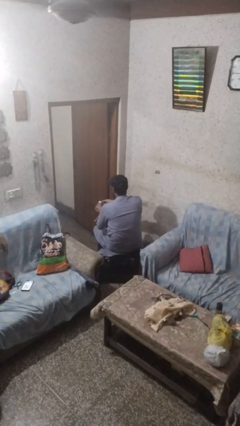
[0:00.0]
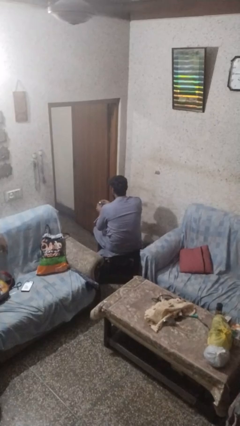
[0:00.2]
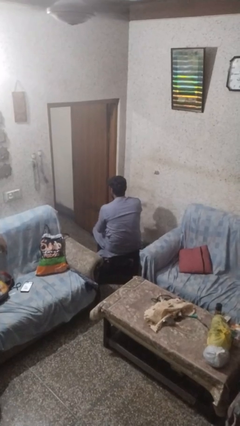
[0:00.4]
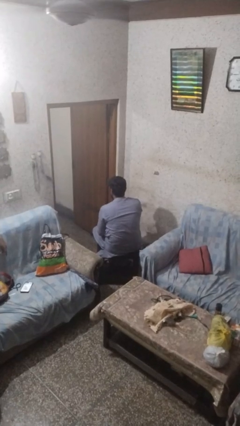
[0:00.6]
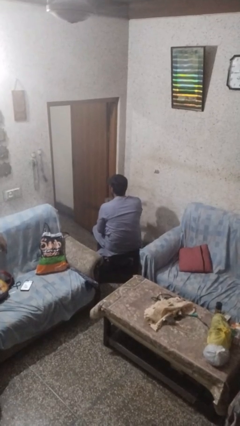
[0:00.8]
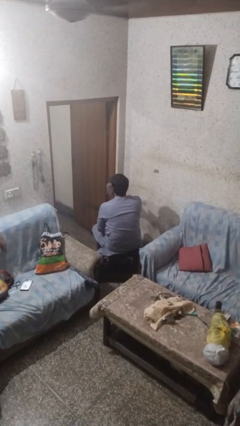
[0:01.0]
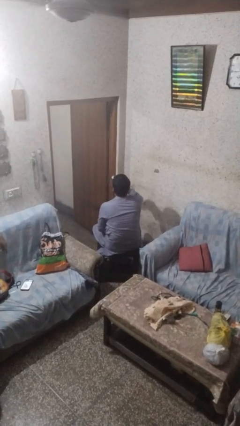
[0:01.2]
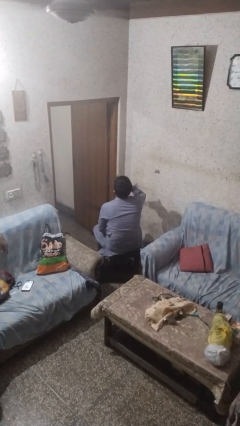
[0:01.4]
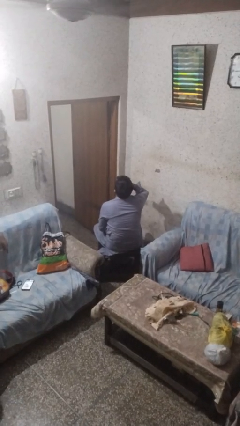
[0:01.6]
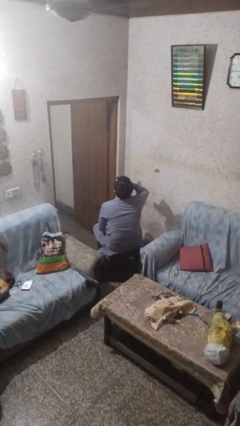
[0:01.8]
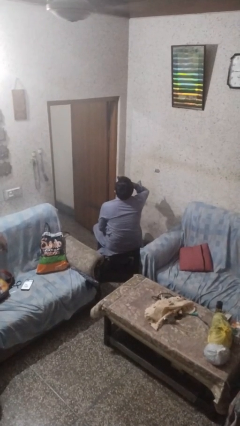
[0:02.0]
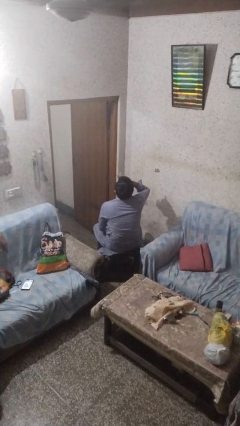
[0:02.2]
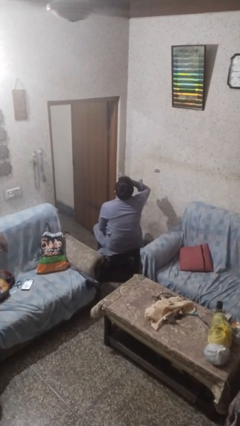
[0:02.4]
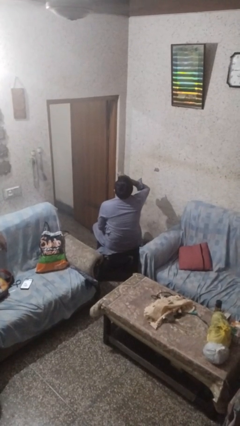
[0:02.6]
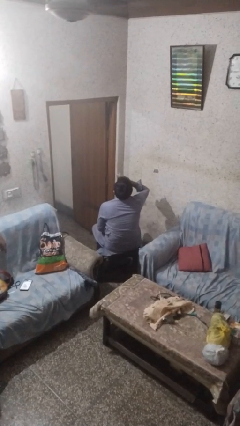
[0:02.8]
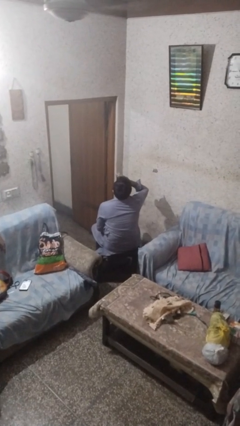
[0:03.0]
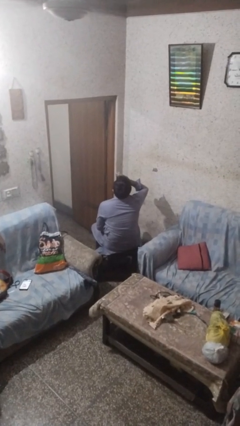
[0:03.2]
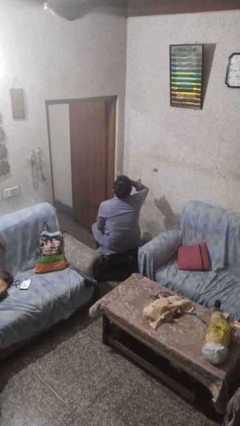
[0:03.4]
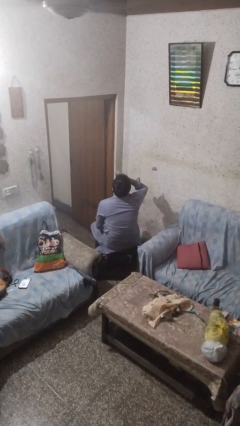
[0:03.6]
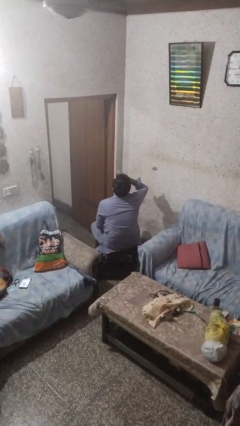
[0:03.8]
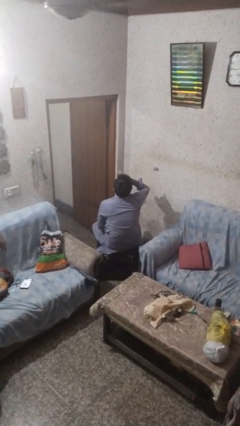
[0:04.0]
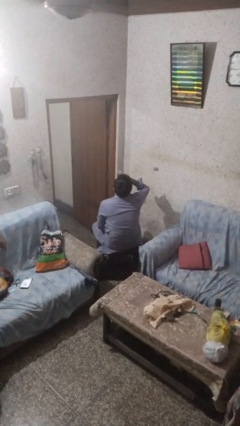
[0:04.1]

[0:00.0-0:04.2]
person drinks from beverage can

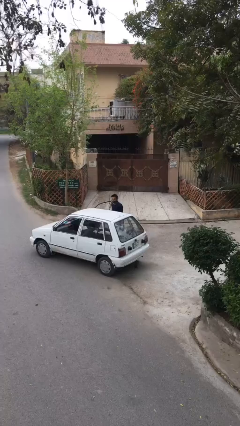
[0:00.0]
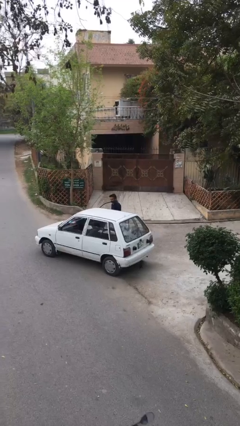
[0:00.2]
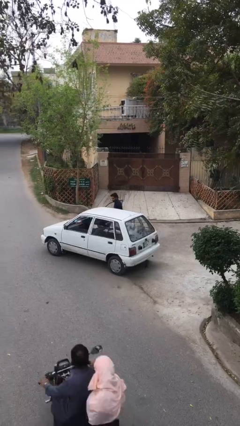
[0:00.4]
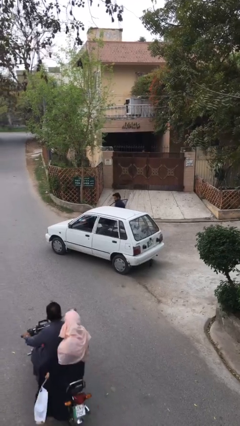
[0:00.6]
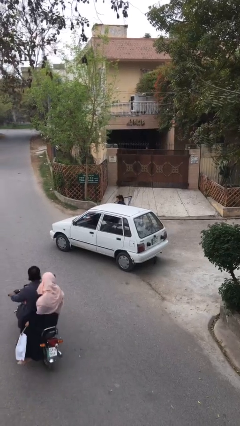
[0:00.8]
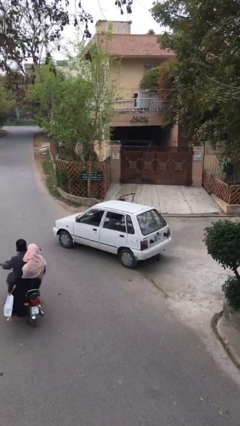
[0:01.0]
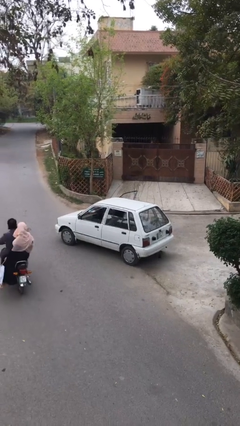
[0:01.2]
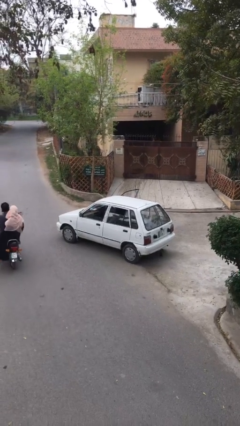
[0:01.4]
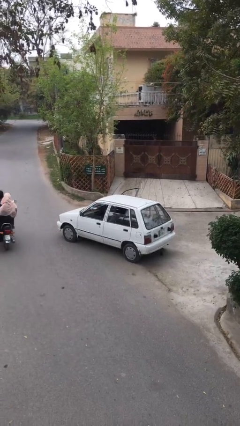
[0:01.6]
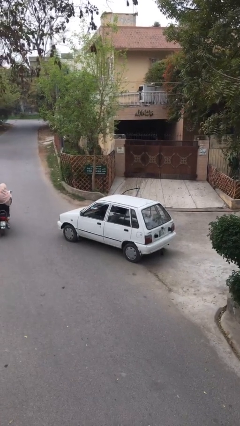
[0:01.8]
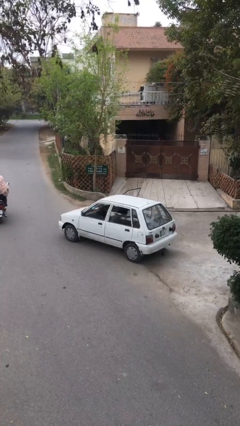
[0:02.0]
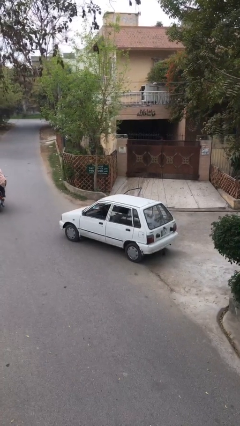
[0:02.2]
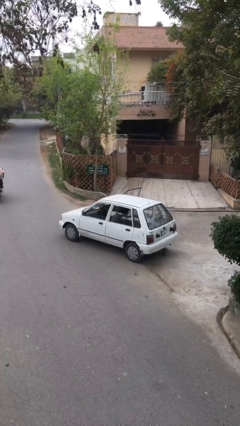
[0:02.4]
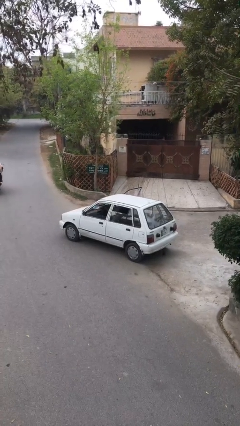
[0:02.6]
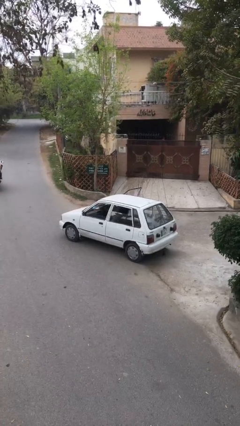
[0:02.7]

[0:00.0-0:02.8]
person enters car

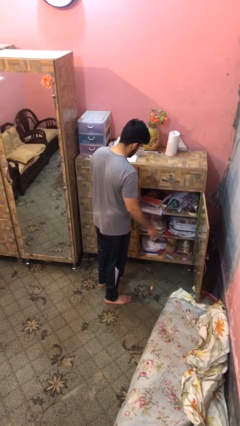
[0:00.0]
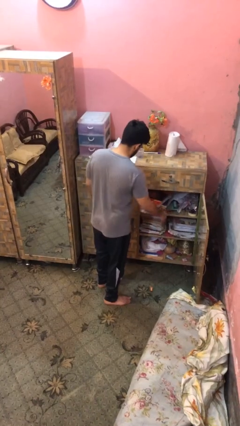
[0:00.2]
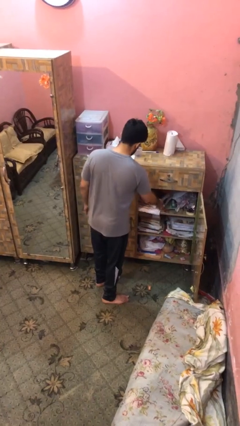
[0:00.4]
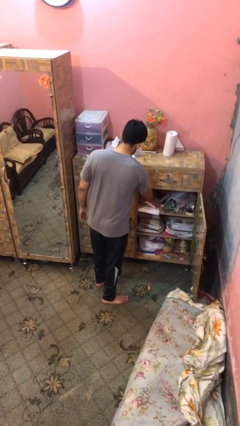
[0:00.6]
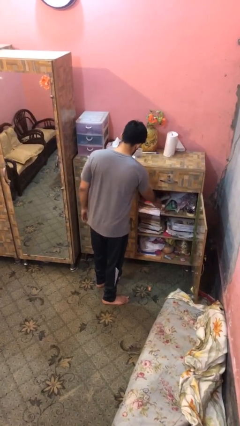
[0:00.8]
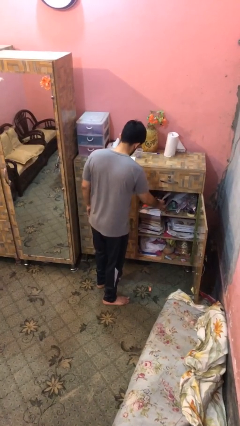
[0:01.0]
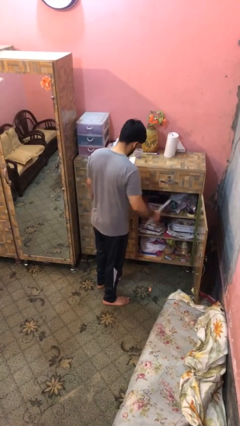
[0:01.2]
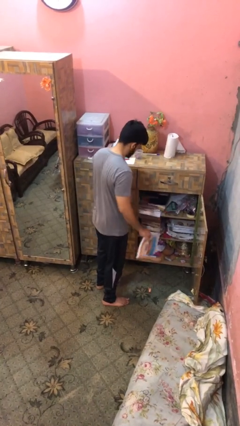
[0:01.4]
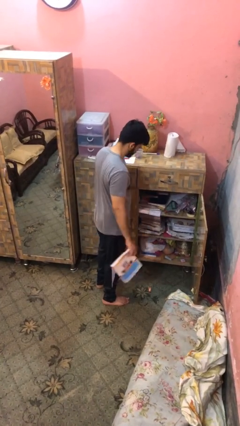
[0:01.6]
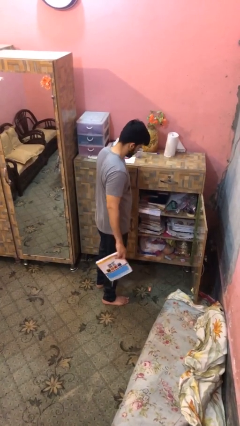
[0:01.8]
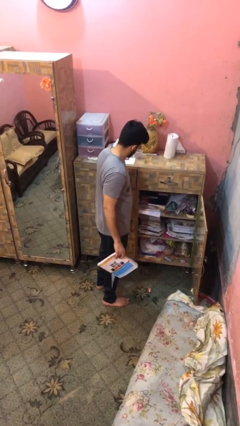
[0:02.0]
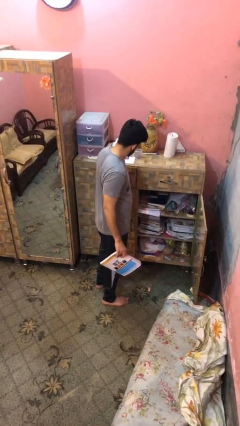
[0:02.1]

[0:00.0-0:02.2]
person picks up object from cabinet

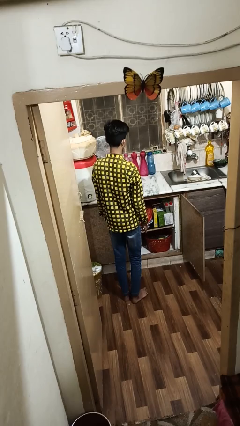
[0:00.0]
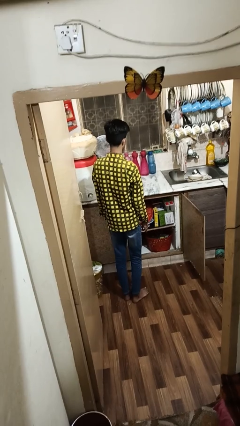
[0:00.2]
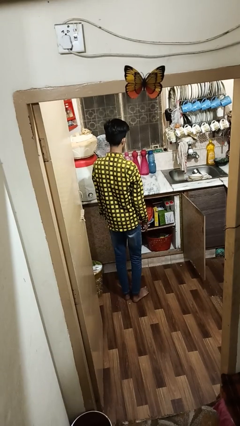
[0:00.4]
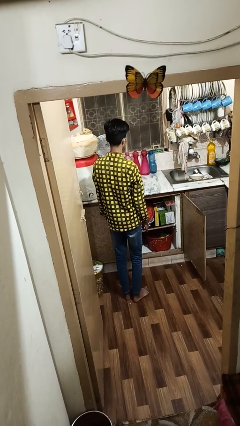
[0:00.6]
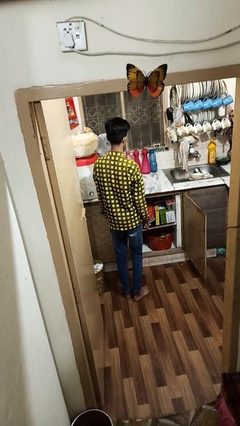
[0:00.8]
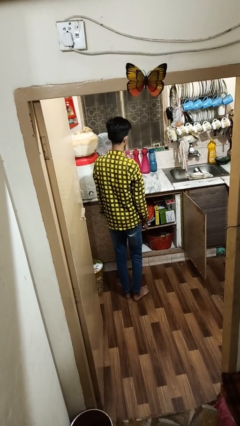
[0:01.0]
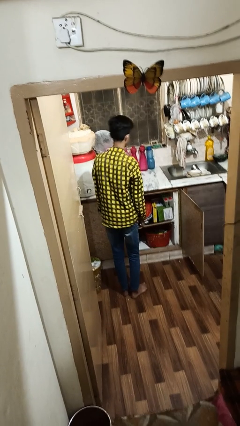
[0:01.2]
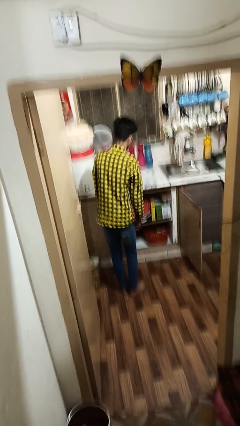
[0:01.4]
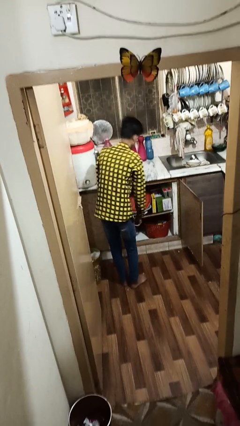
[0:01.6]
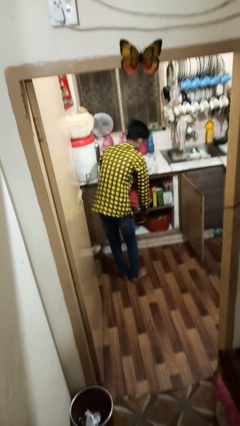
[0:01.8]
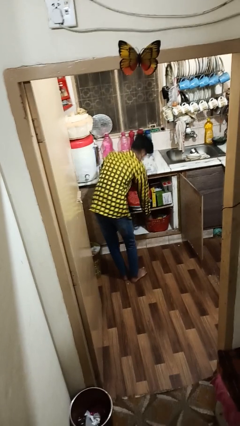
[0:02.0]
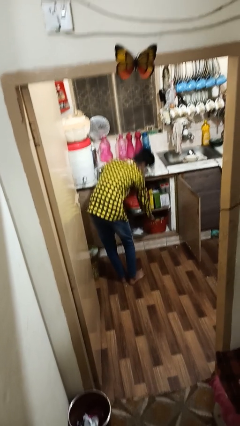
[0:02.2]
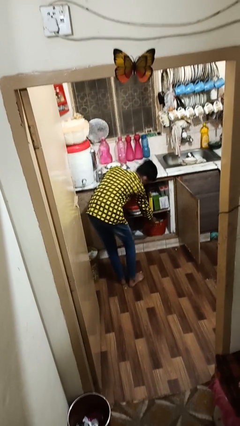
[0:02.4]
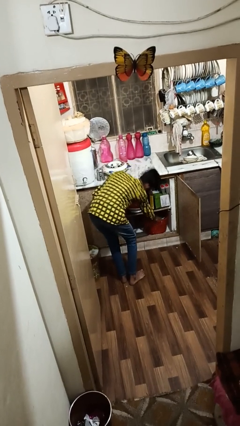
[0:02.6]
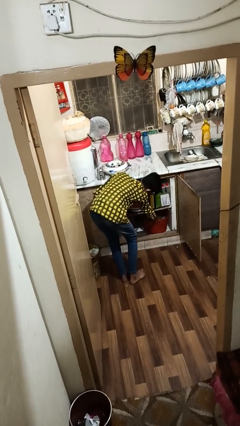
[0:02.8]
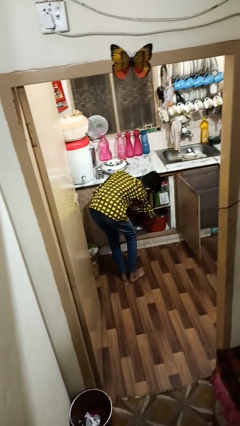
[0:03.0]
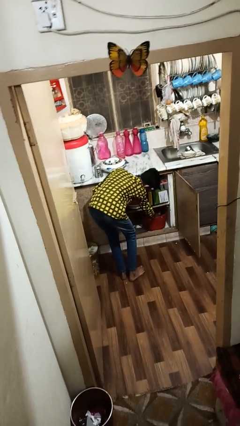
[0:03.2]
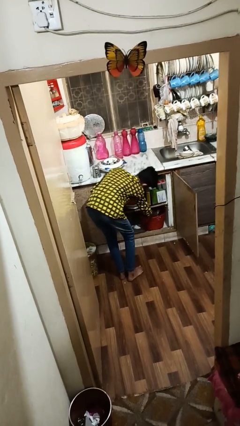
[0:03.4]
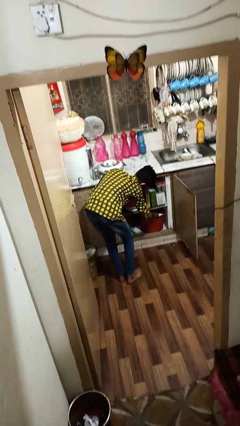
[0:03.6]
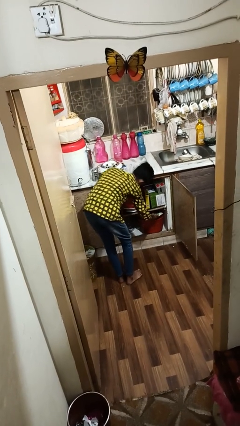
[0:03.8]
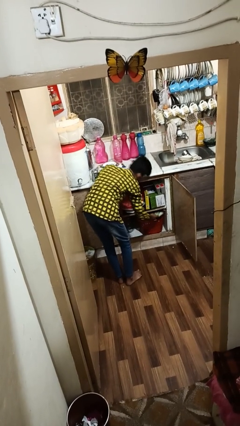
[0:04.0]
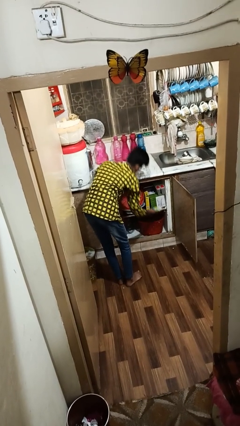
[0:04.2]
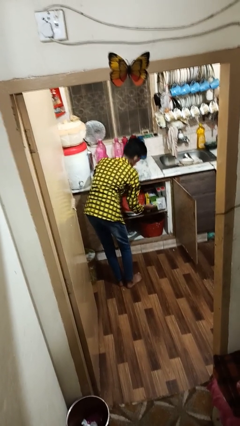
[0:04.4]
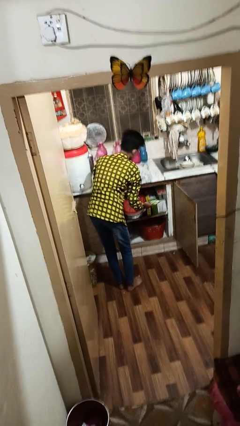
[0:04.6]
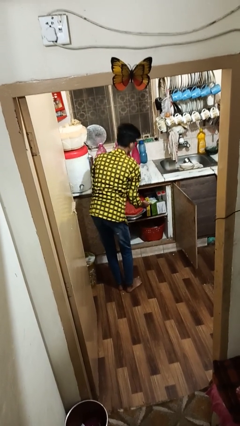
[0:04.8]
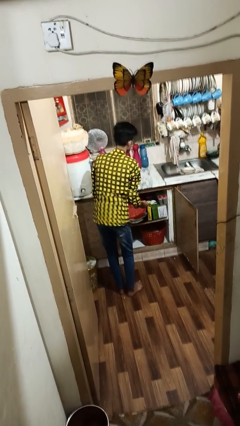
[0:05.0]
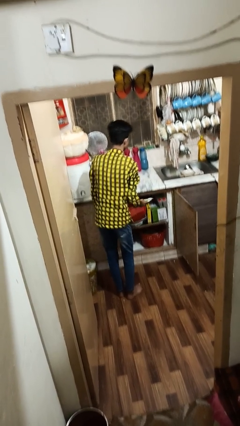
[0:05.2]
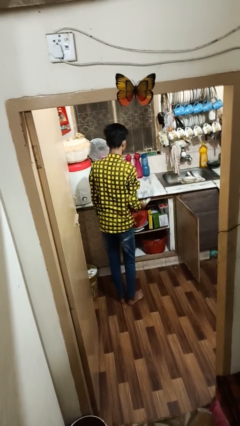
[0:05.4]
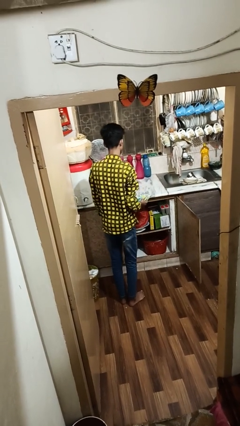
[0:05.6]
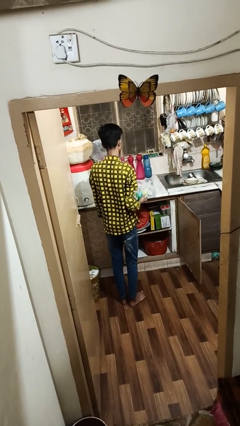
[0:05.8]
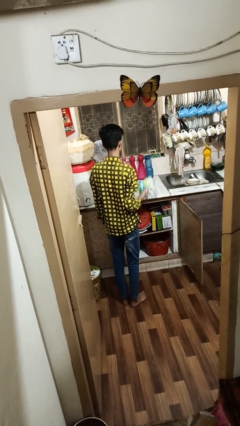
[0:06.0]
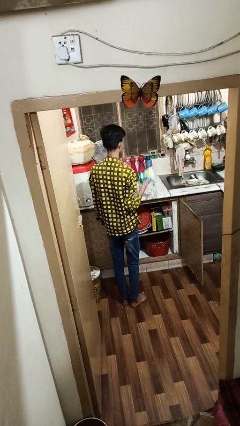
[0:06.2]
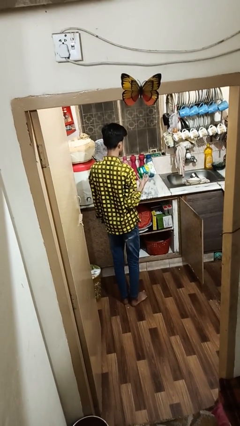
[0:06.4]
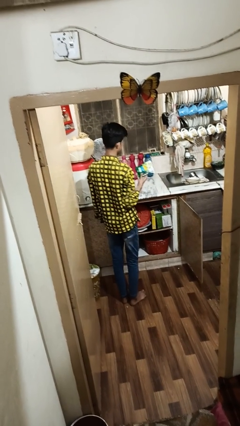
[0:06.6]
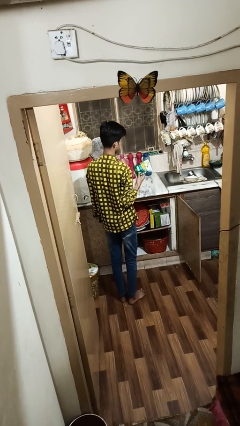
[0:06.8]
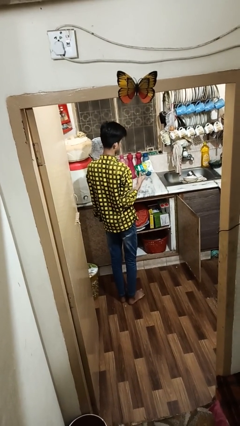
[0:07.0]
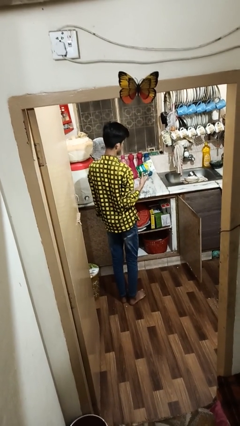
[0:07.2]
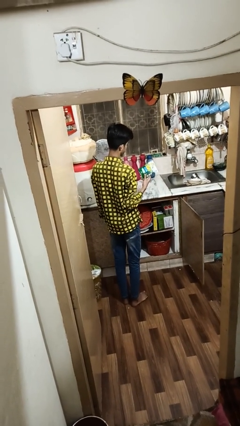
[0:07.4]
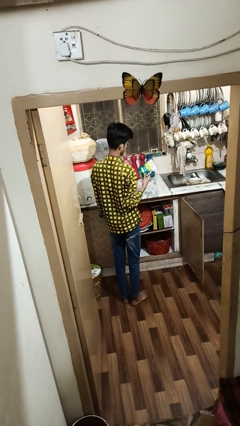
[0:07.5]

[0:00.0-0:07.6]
person takes object from cabinet

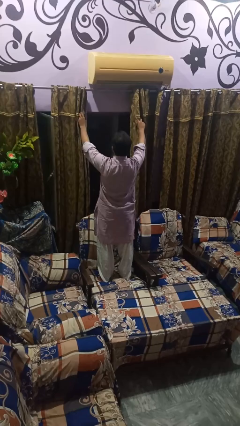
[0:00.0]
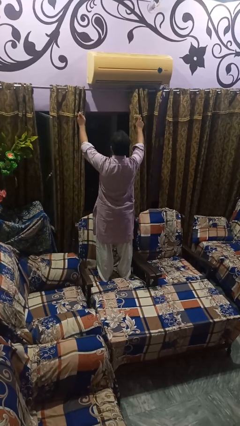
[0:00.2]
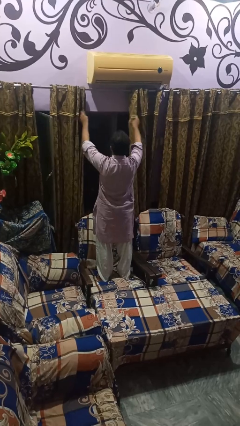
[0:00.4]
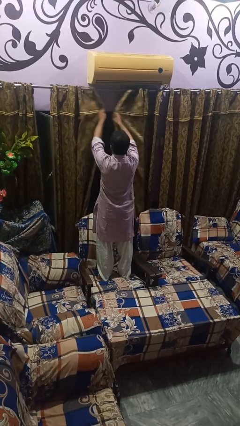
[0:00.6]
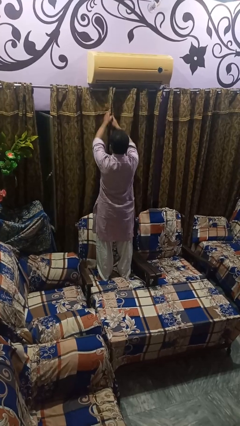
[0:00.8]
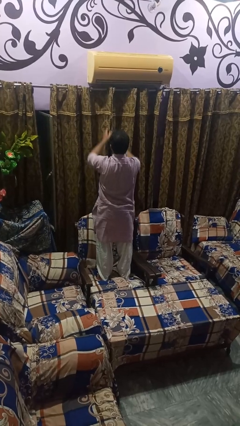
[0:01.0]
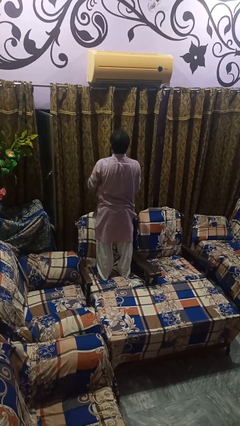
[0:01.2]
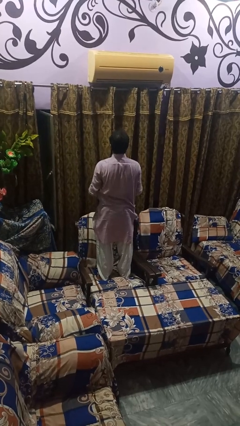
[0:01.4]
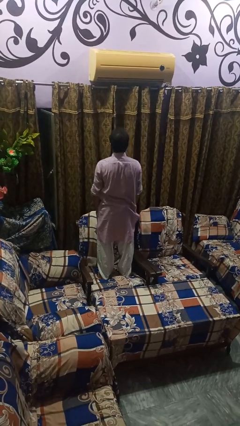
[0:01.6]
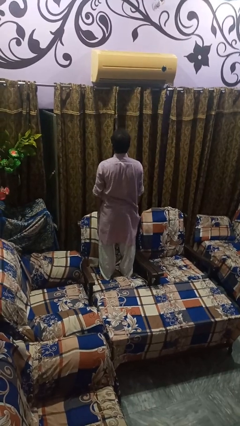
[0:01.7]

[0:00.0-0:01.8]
person closes curtains
